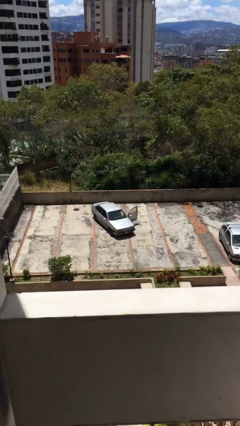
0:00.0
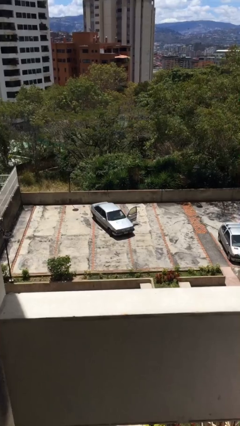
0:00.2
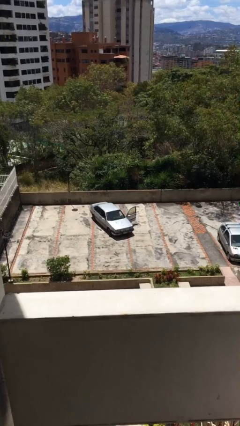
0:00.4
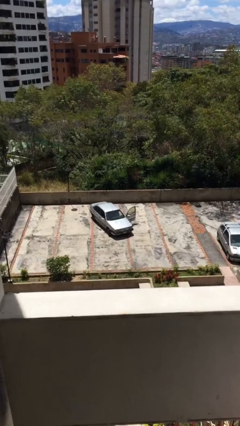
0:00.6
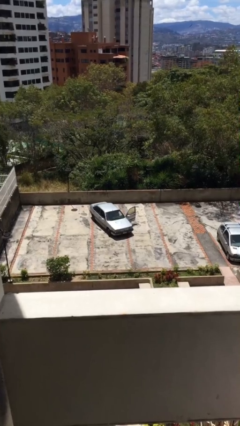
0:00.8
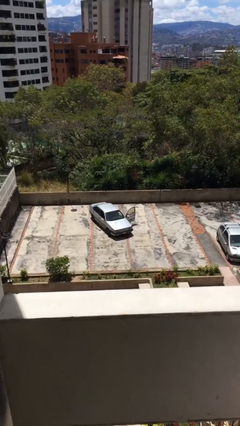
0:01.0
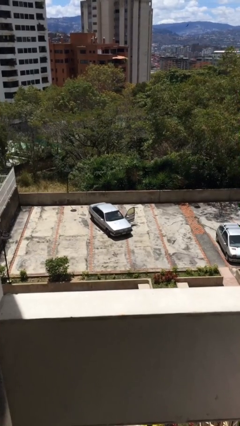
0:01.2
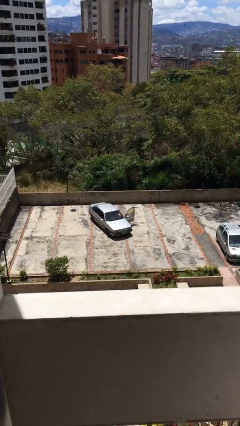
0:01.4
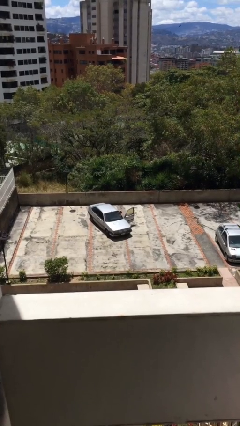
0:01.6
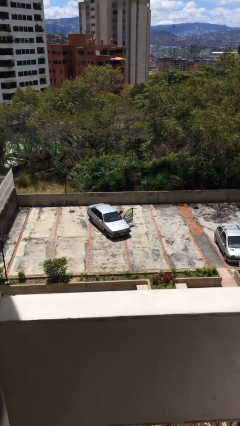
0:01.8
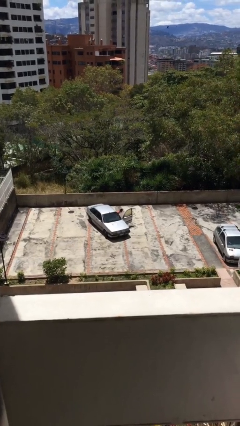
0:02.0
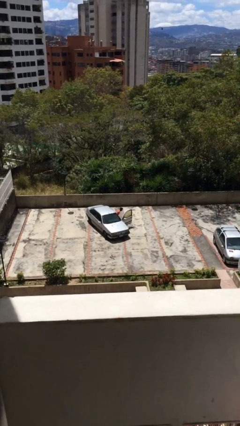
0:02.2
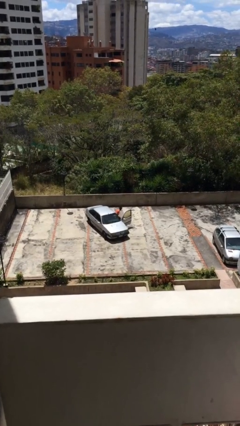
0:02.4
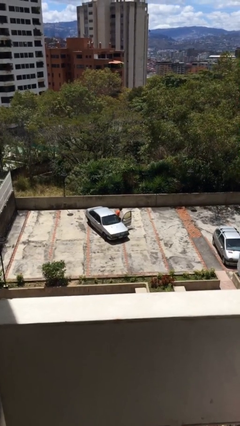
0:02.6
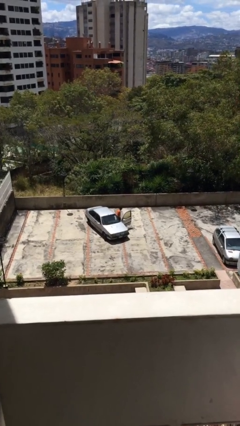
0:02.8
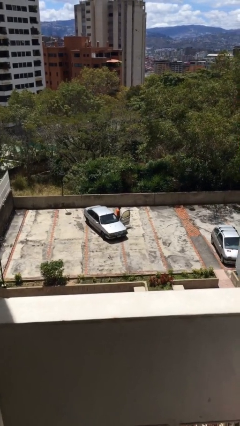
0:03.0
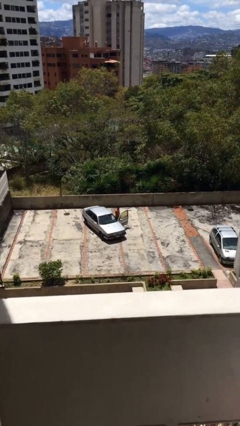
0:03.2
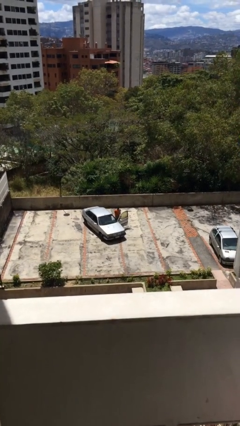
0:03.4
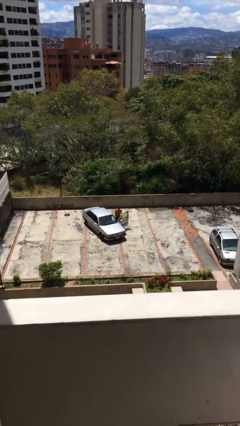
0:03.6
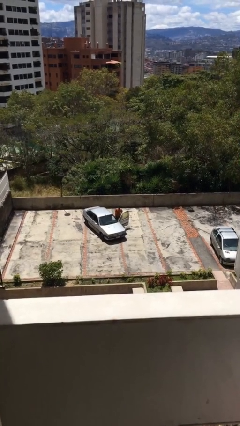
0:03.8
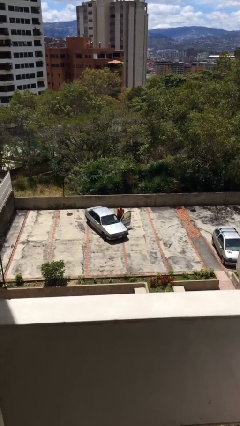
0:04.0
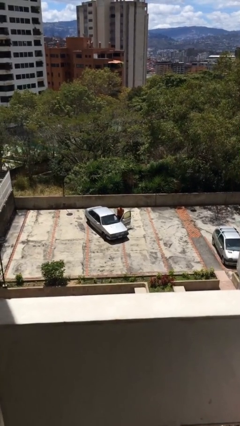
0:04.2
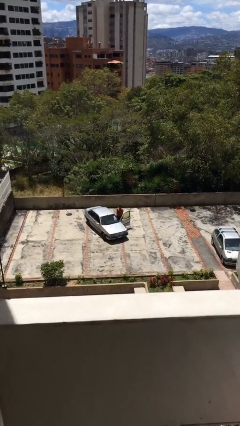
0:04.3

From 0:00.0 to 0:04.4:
person exits car

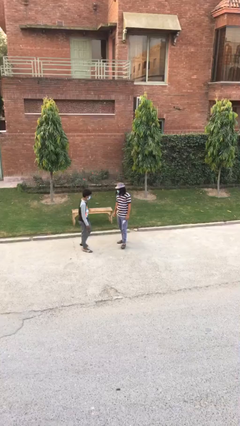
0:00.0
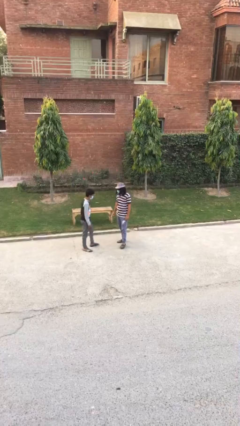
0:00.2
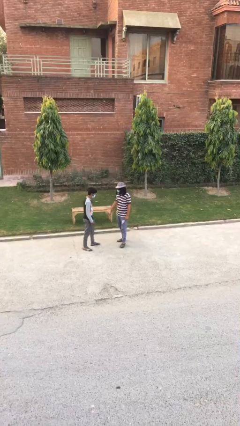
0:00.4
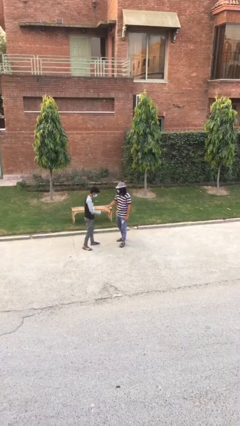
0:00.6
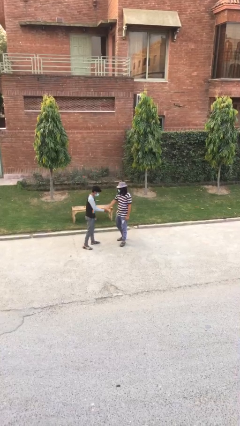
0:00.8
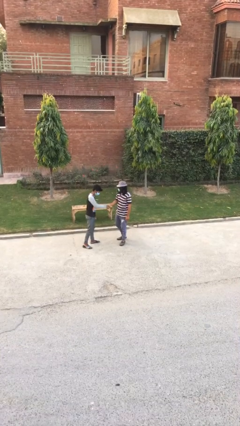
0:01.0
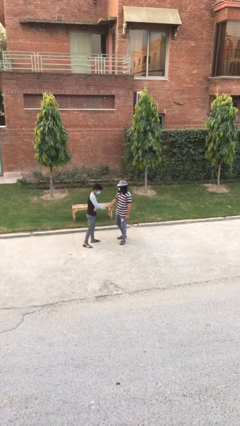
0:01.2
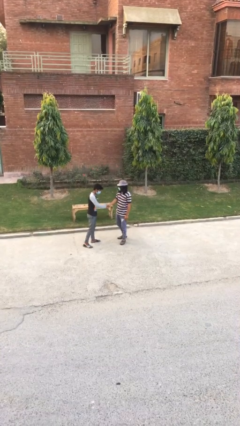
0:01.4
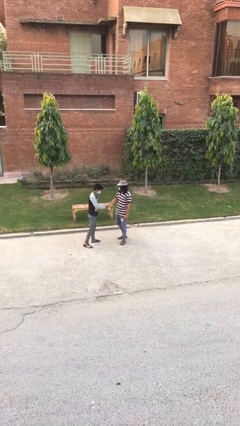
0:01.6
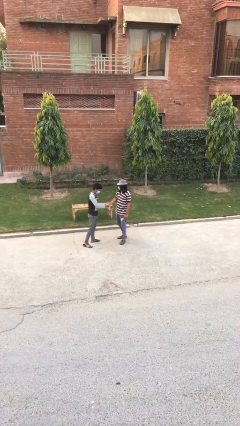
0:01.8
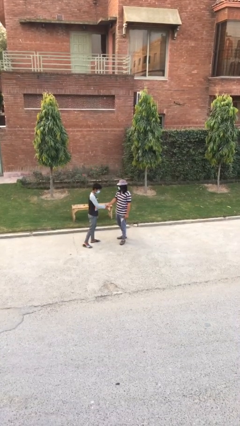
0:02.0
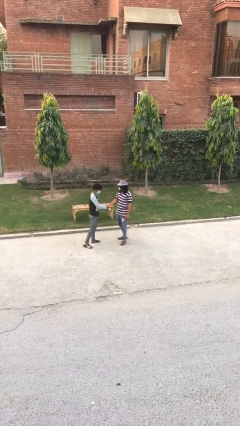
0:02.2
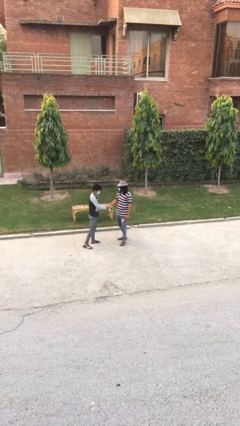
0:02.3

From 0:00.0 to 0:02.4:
person shakes hand

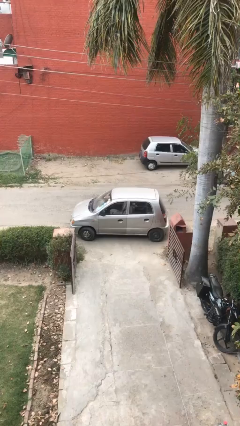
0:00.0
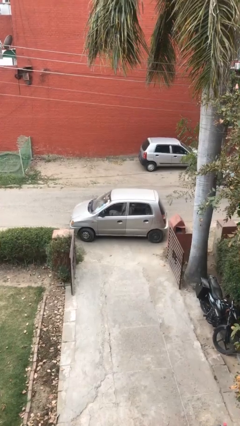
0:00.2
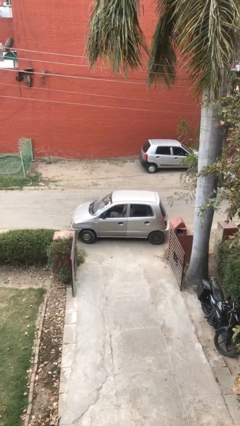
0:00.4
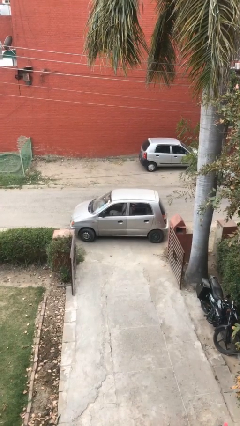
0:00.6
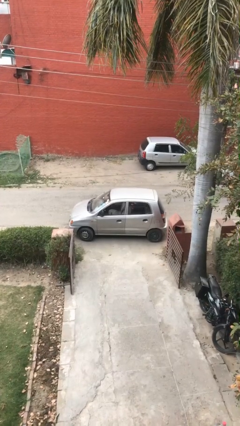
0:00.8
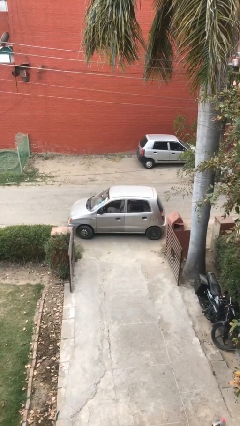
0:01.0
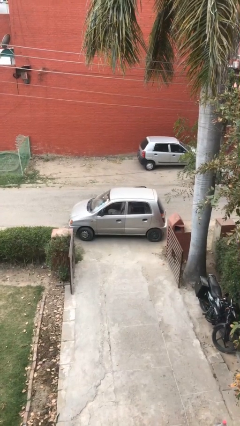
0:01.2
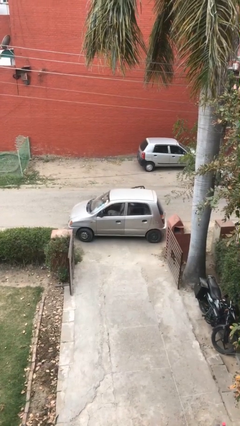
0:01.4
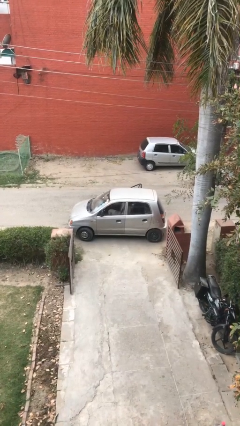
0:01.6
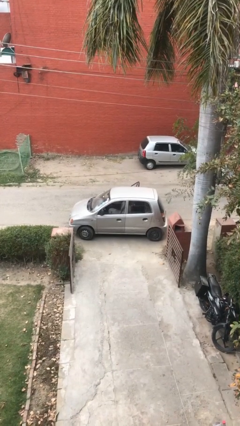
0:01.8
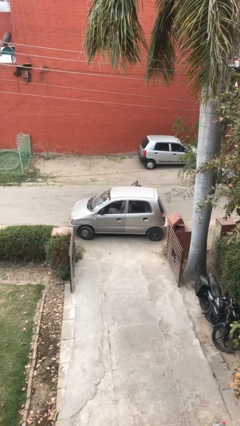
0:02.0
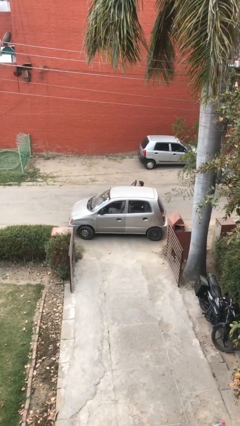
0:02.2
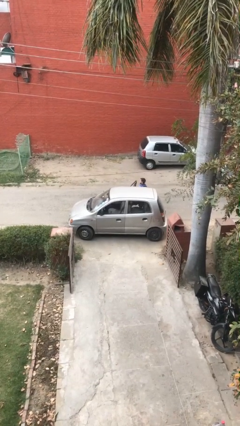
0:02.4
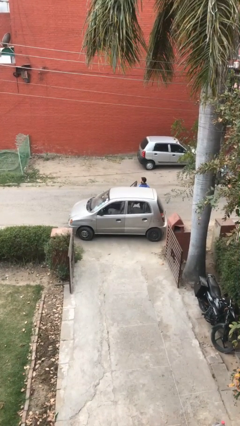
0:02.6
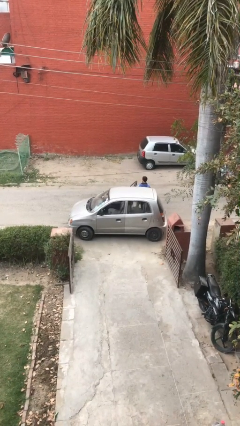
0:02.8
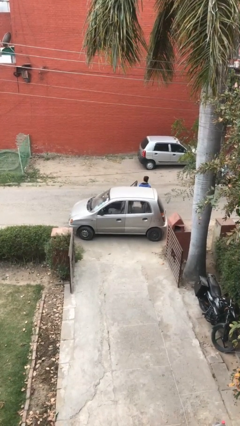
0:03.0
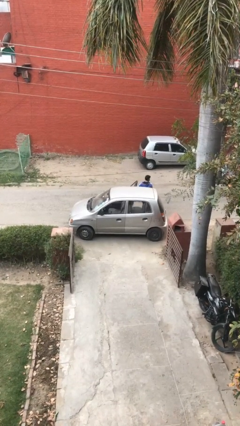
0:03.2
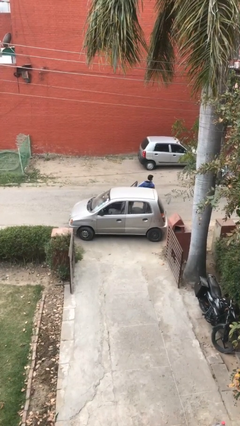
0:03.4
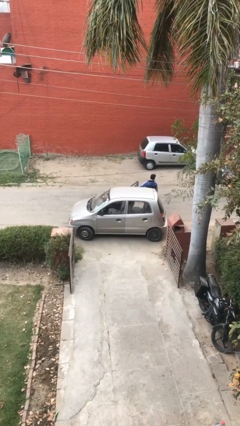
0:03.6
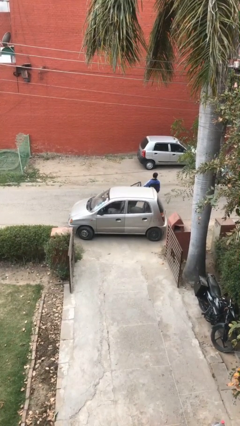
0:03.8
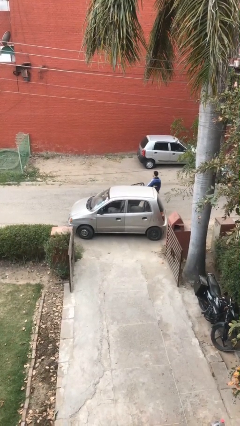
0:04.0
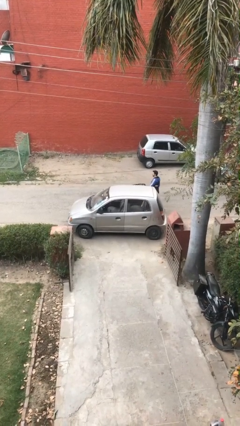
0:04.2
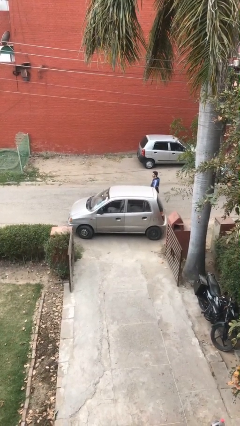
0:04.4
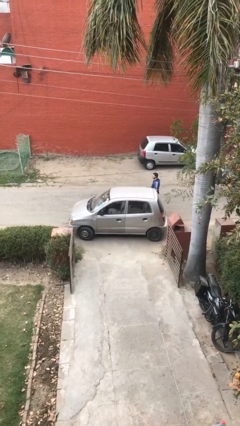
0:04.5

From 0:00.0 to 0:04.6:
car drops off person

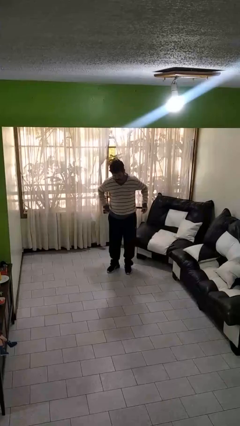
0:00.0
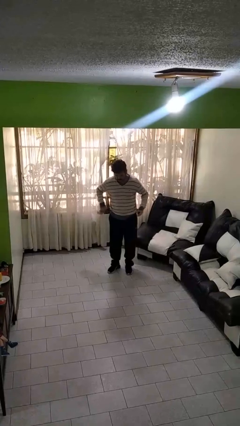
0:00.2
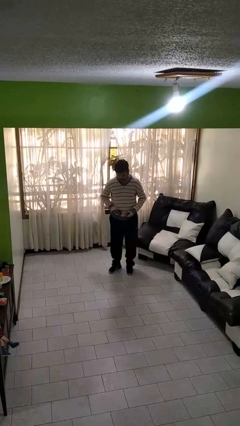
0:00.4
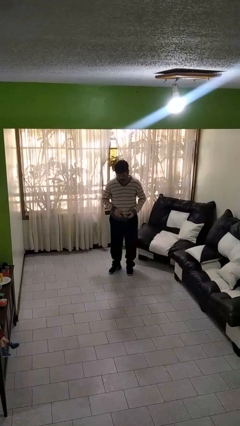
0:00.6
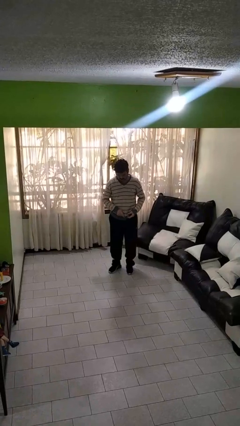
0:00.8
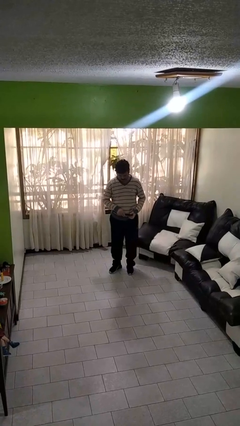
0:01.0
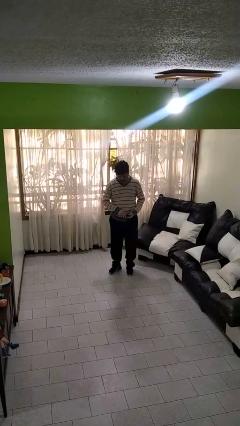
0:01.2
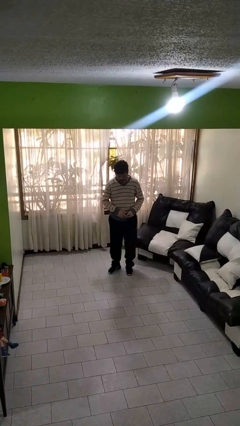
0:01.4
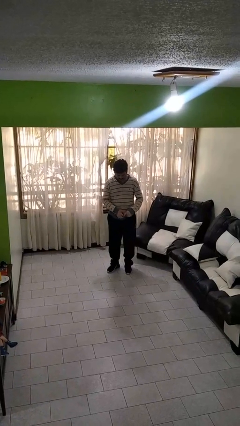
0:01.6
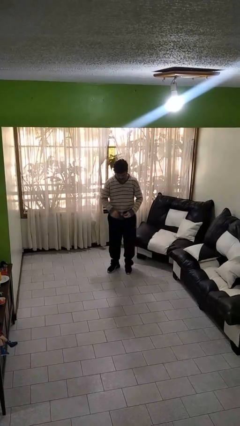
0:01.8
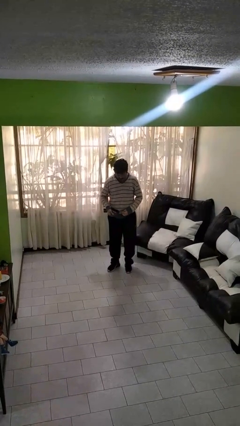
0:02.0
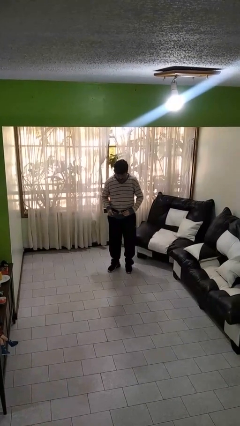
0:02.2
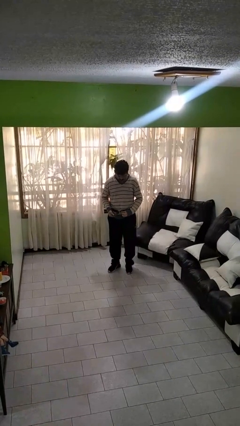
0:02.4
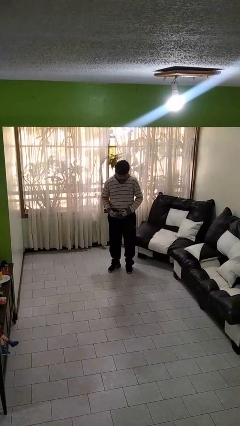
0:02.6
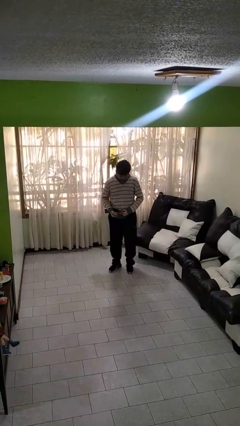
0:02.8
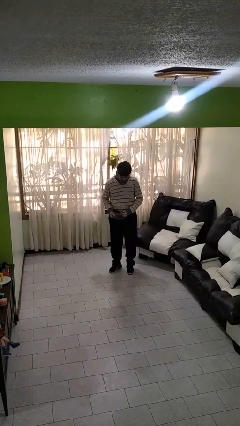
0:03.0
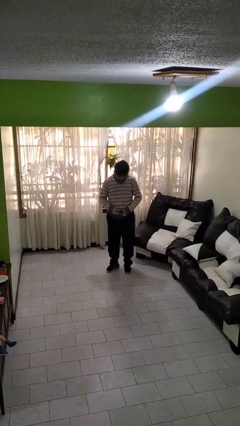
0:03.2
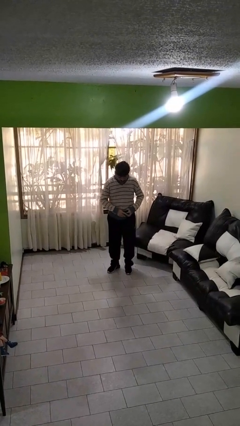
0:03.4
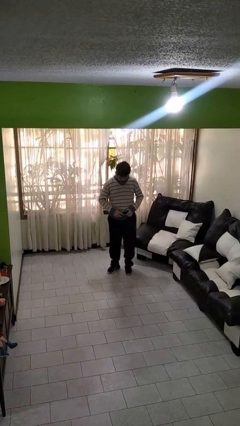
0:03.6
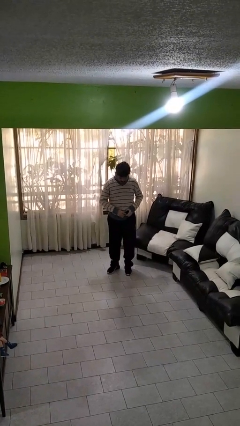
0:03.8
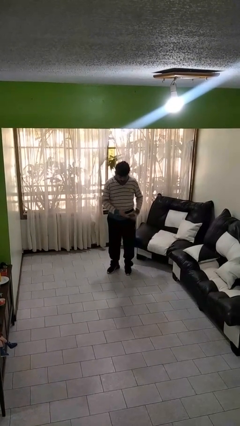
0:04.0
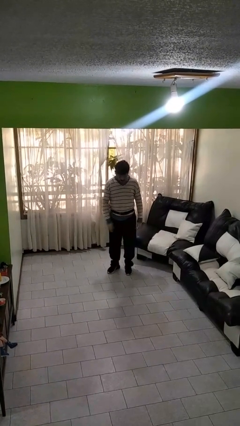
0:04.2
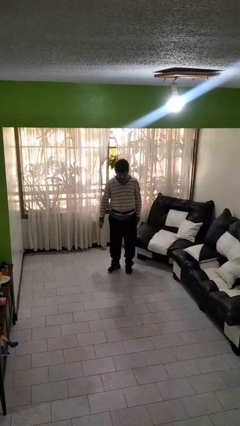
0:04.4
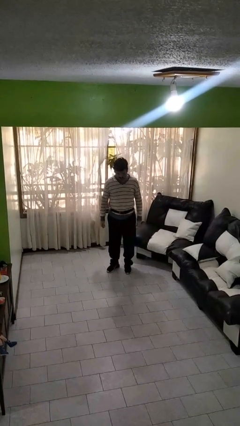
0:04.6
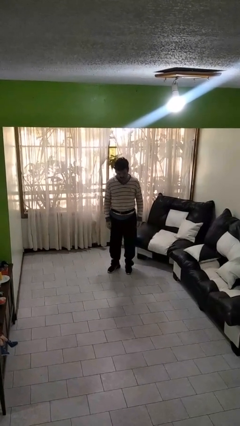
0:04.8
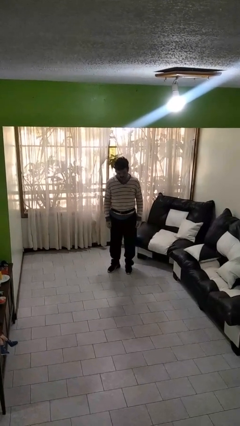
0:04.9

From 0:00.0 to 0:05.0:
person puts on belt

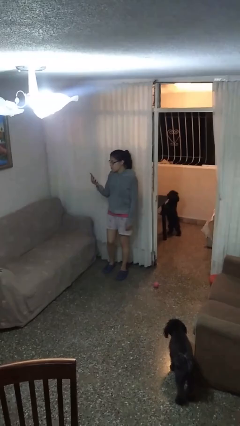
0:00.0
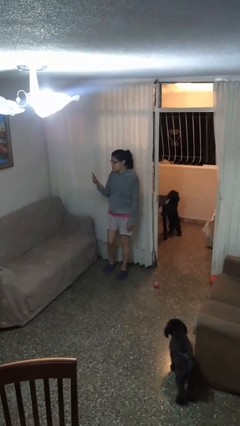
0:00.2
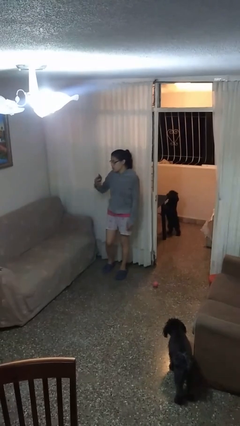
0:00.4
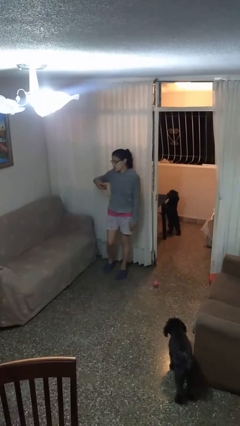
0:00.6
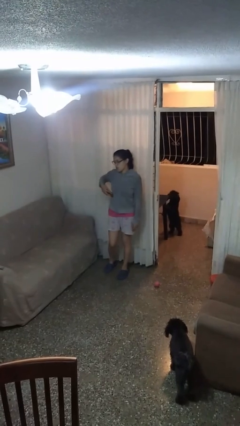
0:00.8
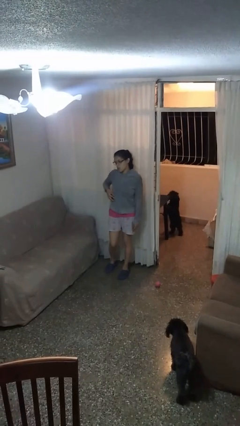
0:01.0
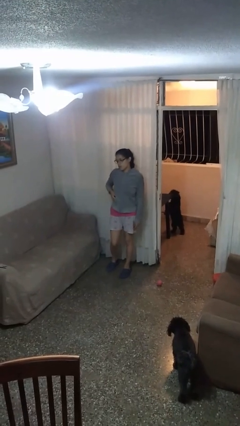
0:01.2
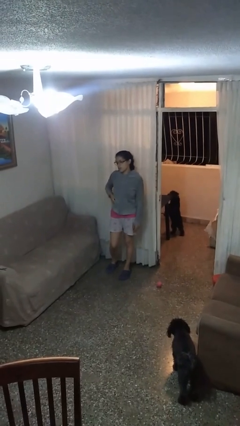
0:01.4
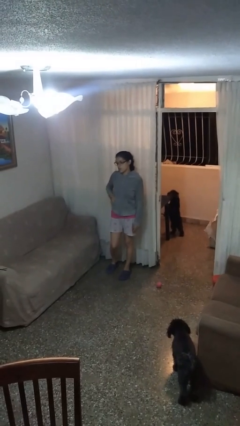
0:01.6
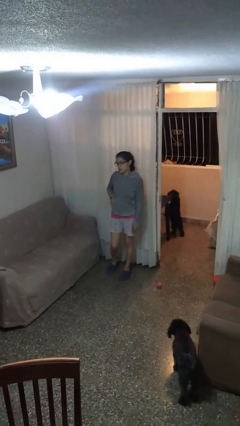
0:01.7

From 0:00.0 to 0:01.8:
person puts phone into pocket
